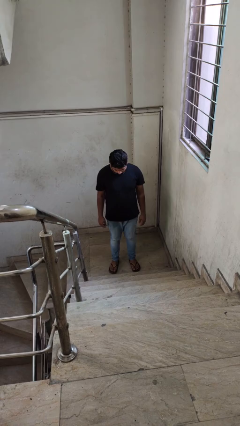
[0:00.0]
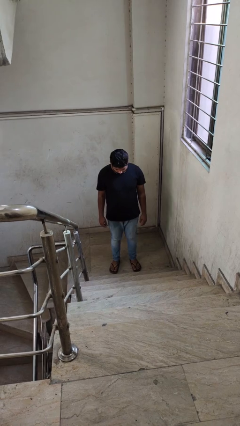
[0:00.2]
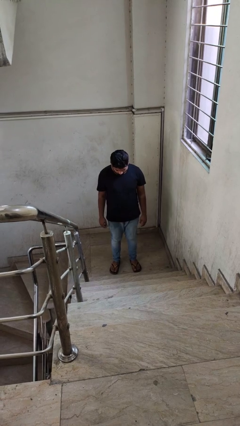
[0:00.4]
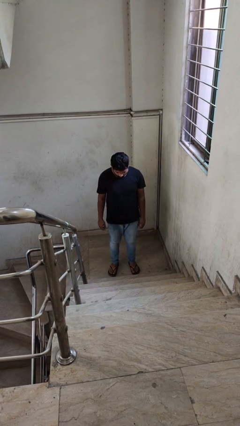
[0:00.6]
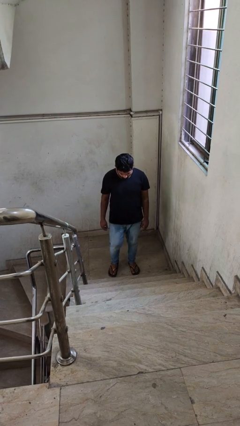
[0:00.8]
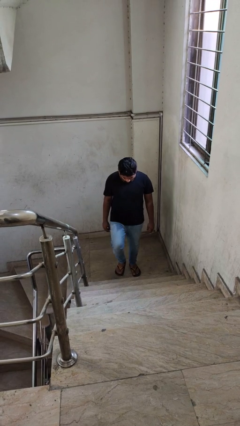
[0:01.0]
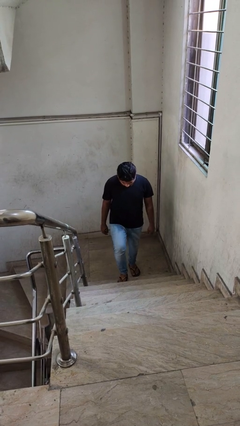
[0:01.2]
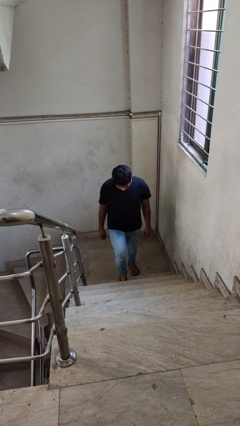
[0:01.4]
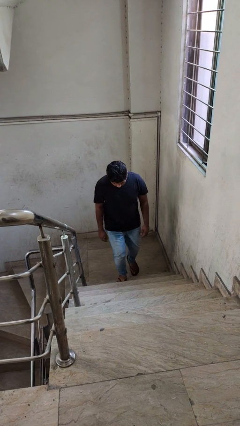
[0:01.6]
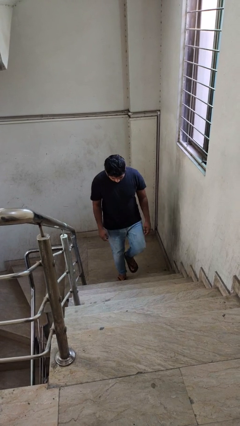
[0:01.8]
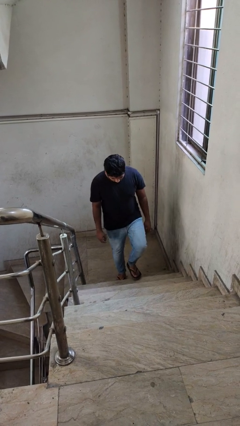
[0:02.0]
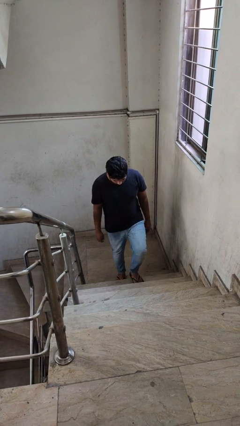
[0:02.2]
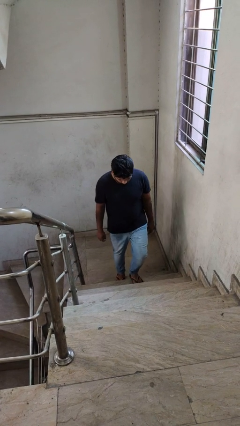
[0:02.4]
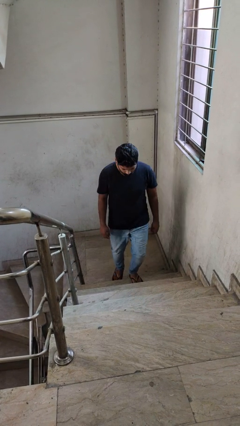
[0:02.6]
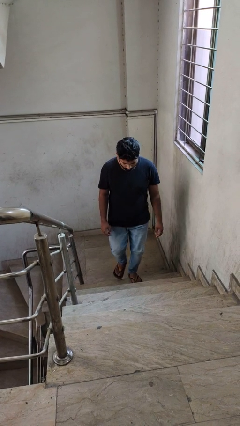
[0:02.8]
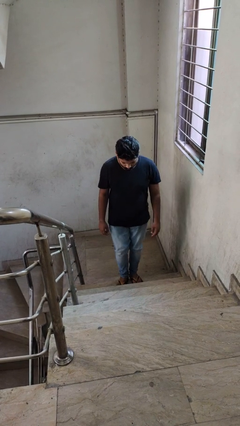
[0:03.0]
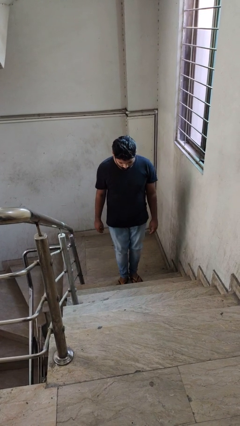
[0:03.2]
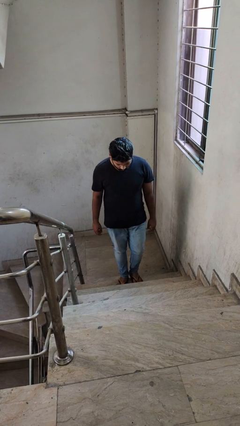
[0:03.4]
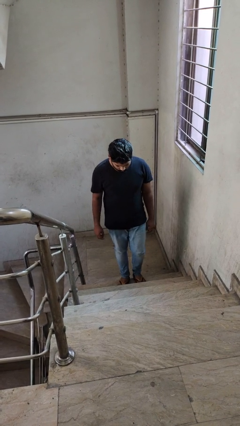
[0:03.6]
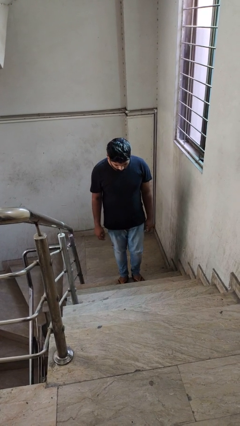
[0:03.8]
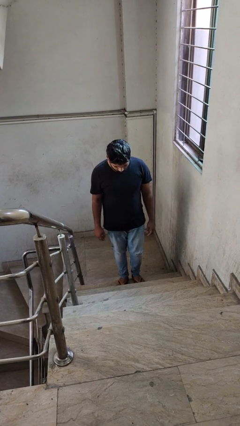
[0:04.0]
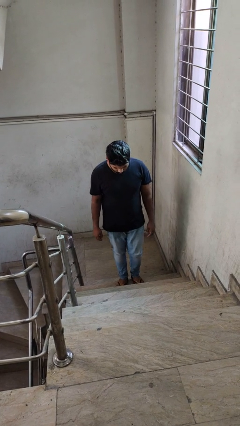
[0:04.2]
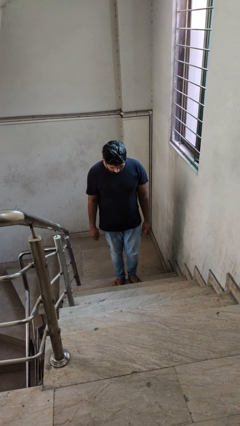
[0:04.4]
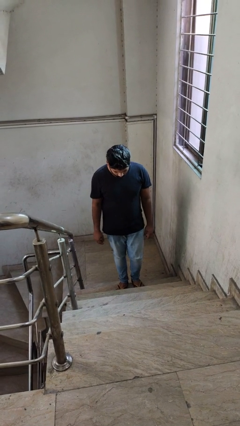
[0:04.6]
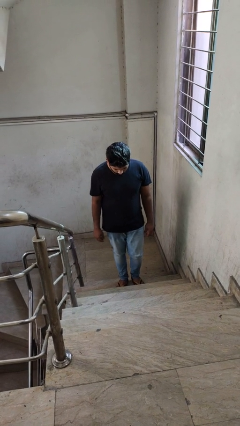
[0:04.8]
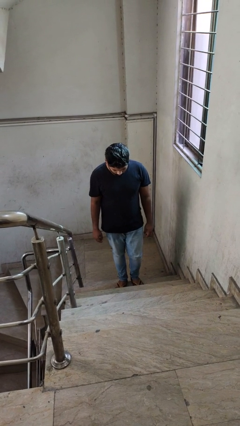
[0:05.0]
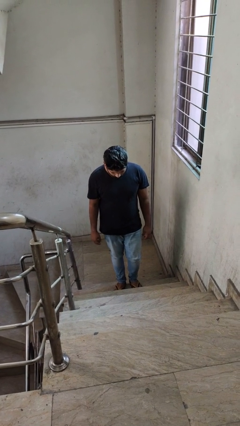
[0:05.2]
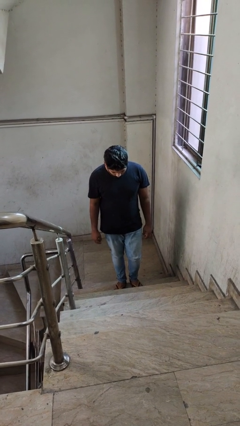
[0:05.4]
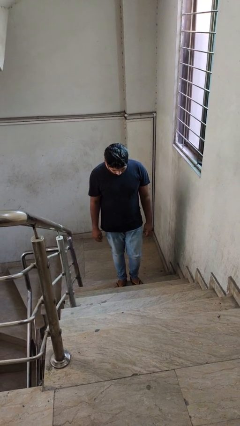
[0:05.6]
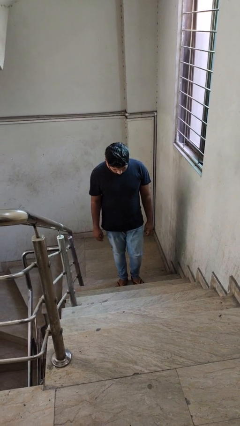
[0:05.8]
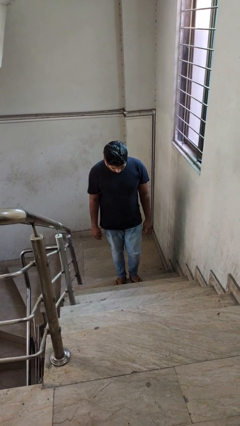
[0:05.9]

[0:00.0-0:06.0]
person climbs up stairs

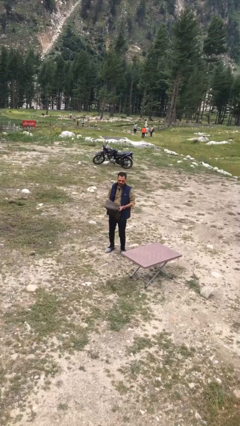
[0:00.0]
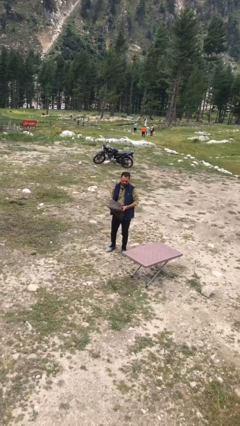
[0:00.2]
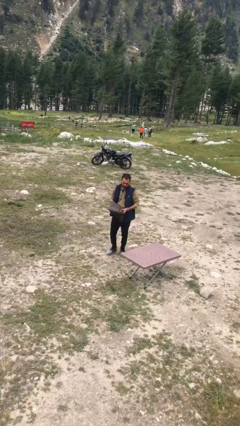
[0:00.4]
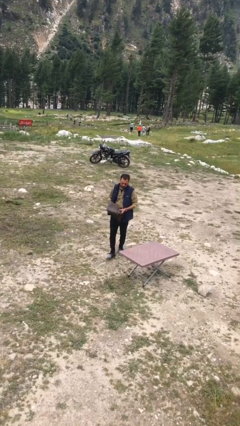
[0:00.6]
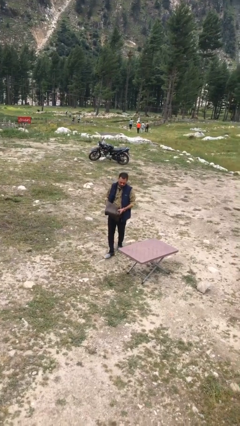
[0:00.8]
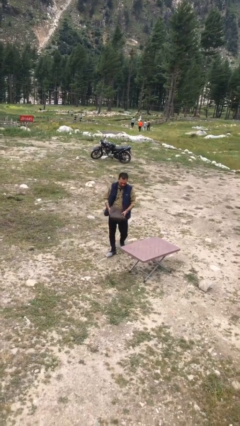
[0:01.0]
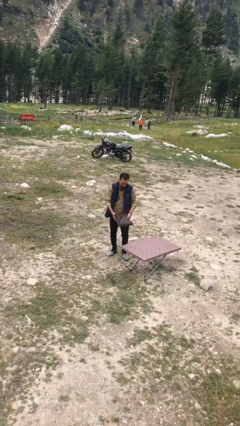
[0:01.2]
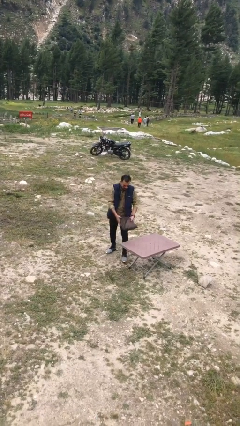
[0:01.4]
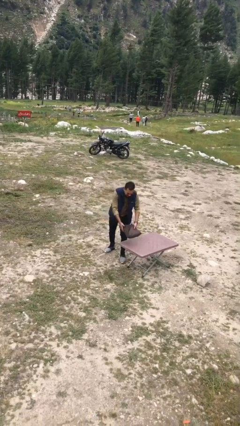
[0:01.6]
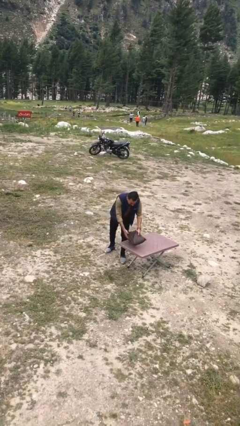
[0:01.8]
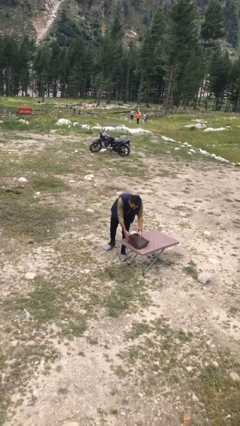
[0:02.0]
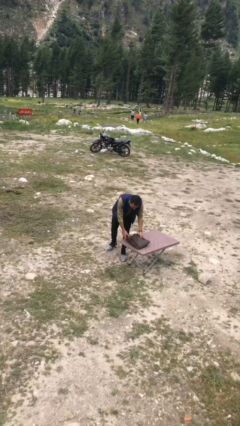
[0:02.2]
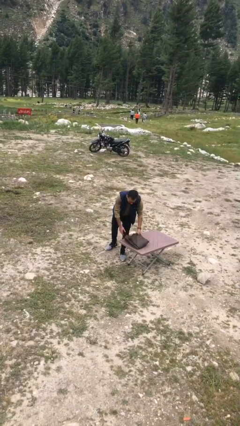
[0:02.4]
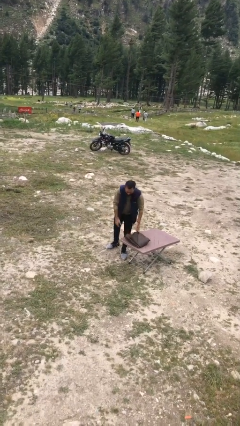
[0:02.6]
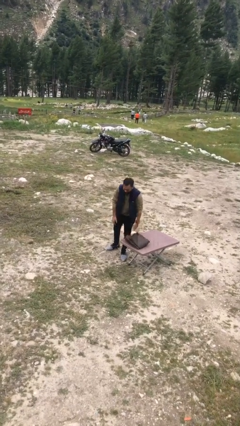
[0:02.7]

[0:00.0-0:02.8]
person puts down object on table

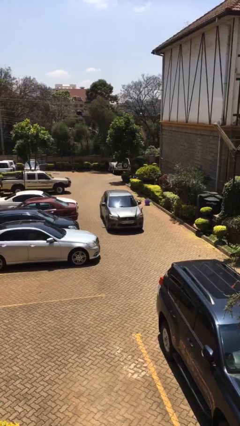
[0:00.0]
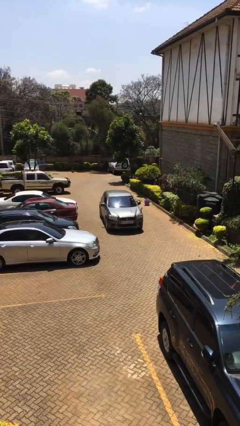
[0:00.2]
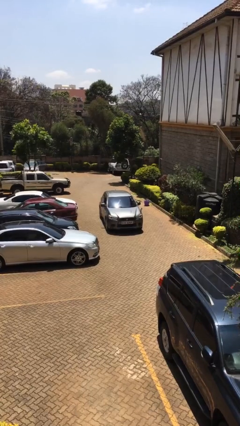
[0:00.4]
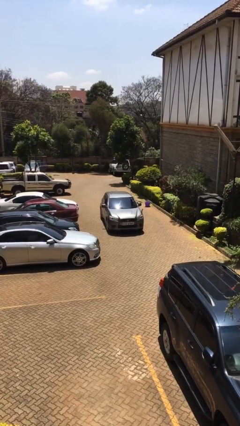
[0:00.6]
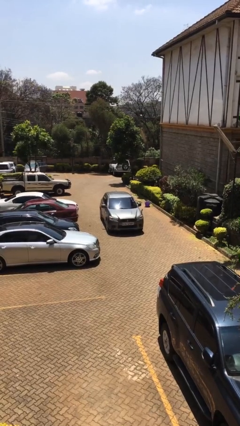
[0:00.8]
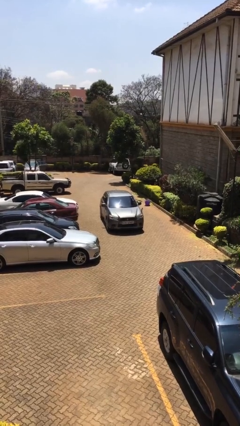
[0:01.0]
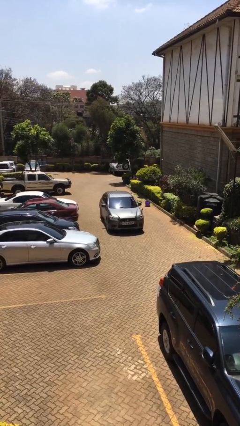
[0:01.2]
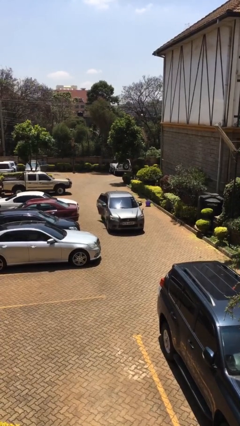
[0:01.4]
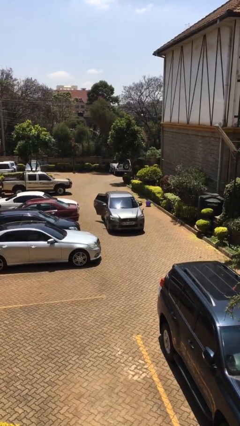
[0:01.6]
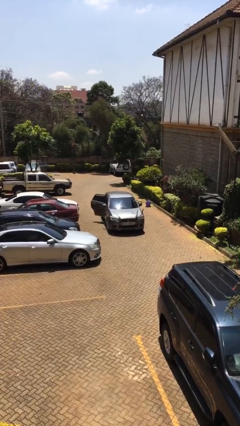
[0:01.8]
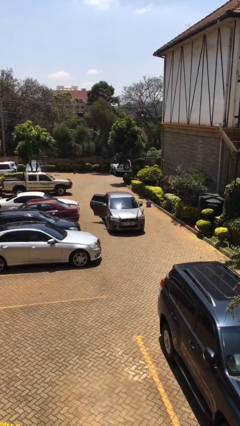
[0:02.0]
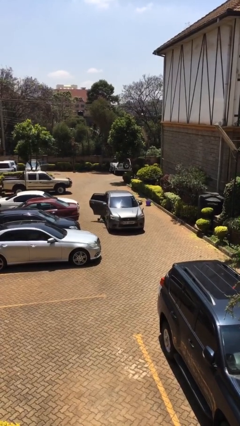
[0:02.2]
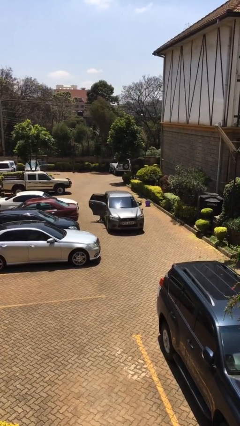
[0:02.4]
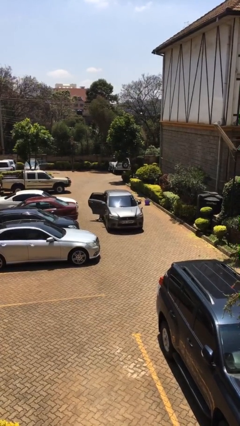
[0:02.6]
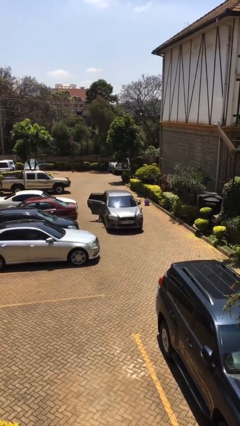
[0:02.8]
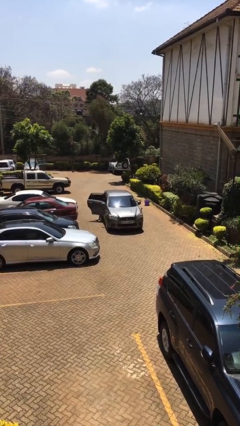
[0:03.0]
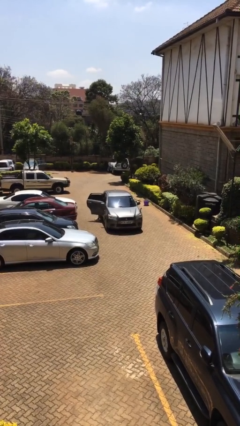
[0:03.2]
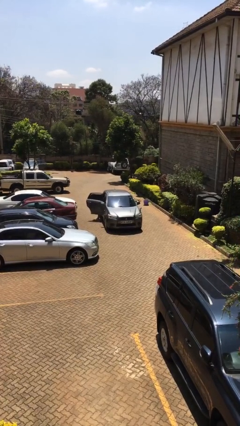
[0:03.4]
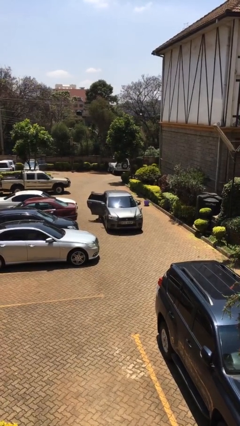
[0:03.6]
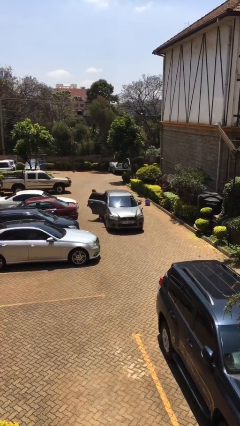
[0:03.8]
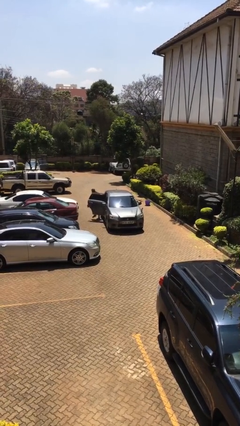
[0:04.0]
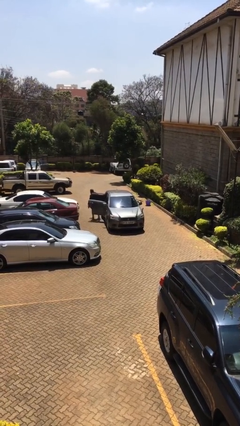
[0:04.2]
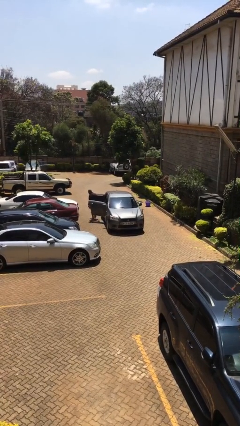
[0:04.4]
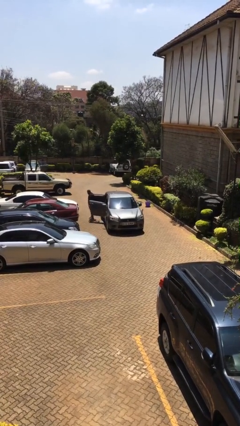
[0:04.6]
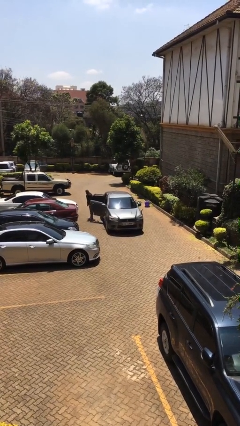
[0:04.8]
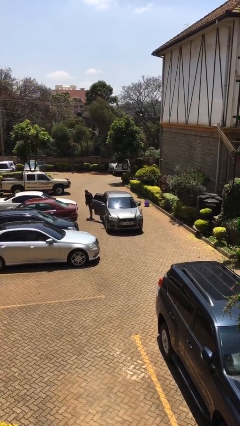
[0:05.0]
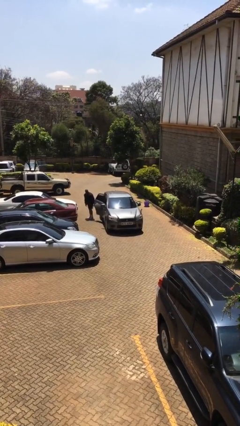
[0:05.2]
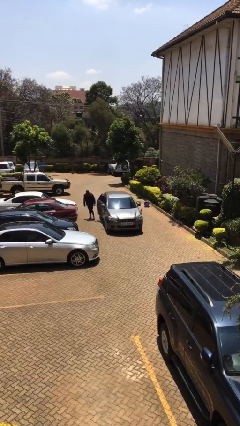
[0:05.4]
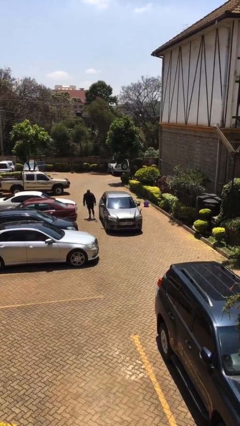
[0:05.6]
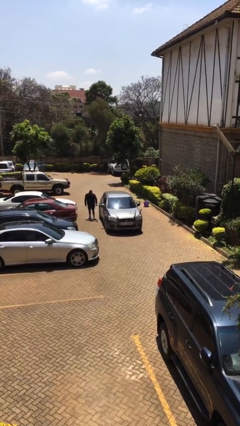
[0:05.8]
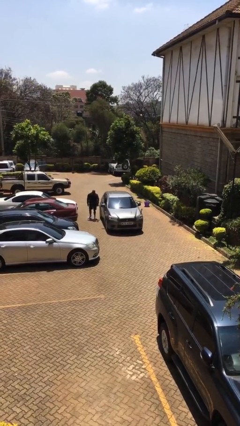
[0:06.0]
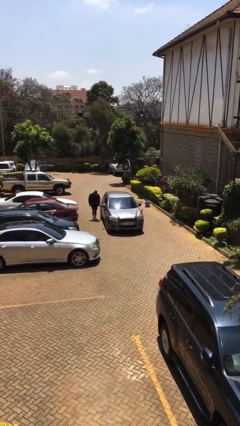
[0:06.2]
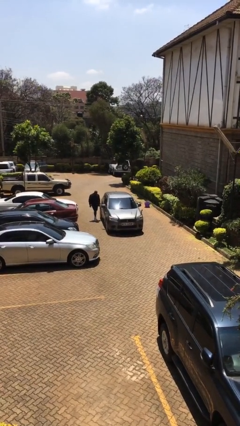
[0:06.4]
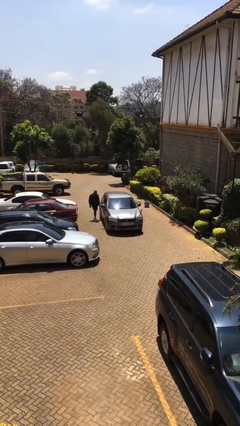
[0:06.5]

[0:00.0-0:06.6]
car drops off person

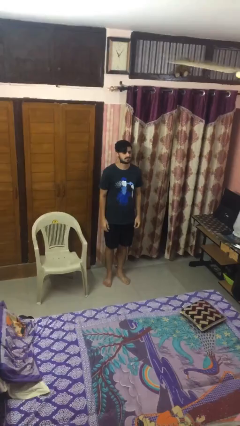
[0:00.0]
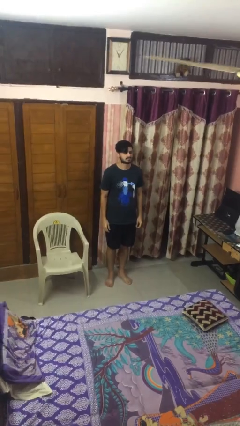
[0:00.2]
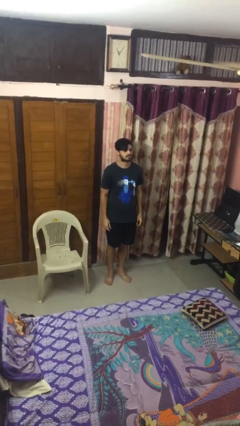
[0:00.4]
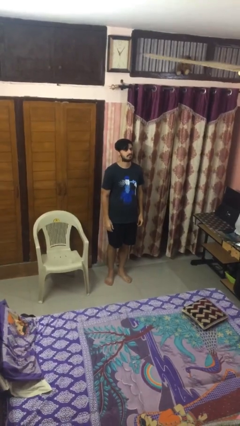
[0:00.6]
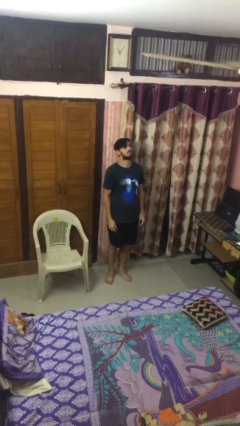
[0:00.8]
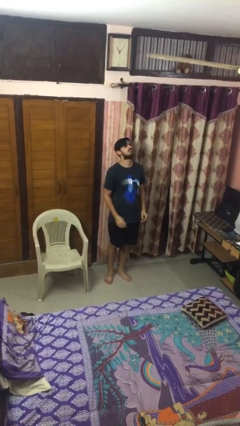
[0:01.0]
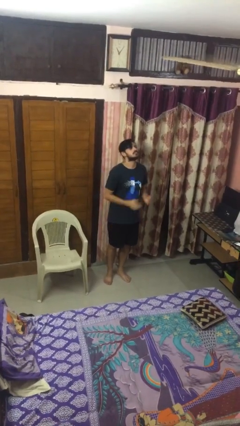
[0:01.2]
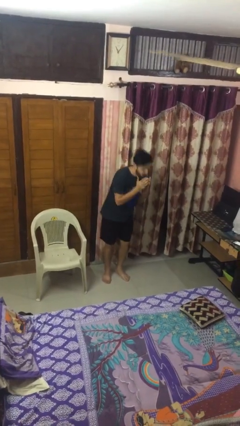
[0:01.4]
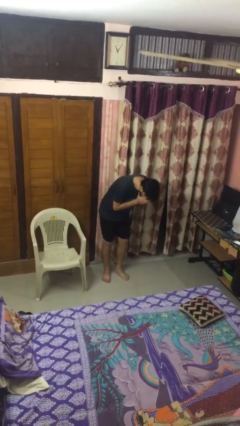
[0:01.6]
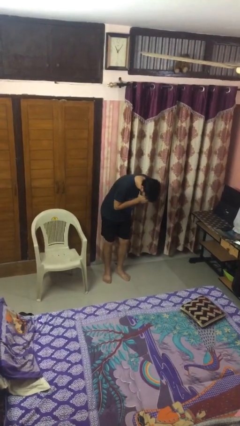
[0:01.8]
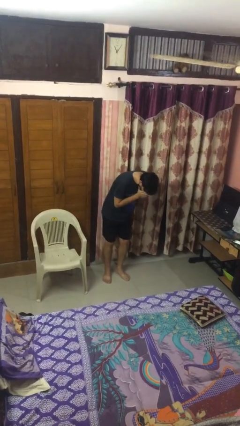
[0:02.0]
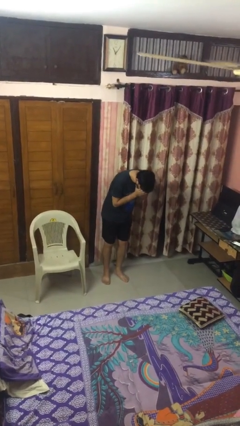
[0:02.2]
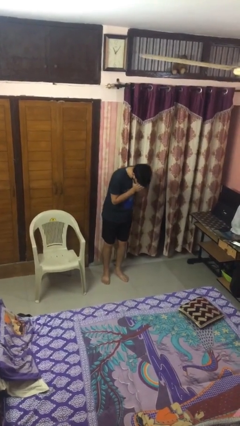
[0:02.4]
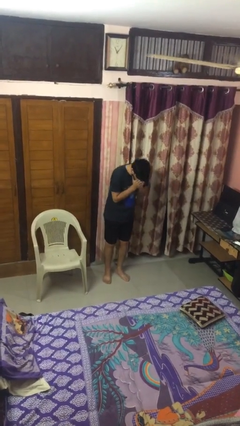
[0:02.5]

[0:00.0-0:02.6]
person sneezes into hand
